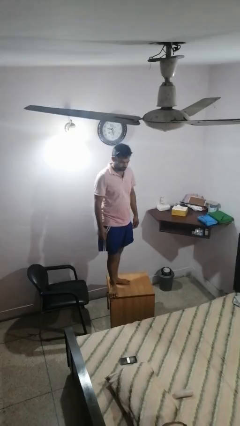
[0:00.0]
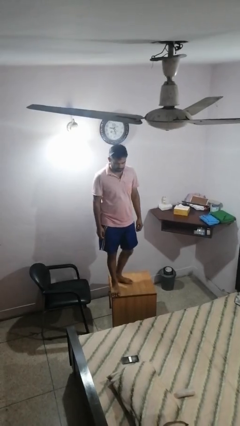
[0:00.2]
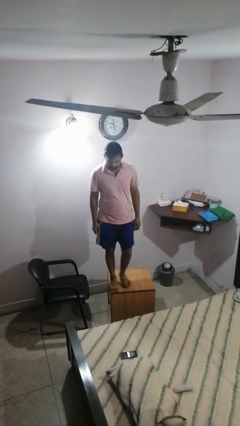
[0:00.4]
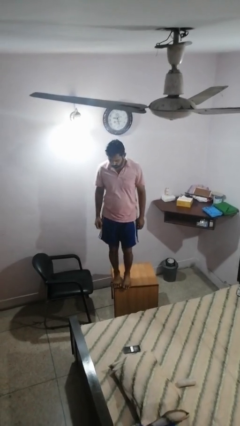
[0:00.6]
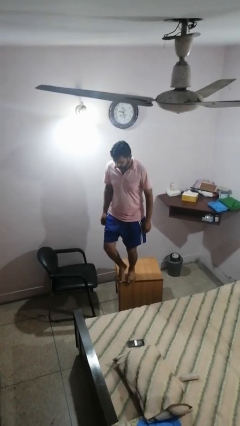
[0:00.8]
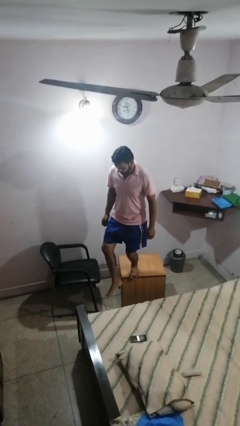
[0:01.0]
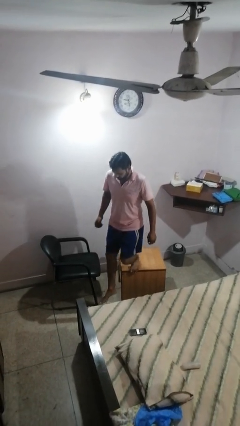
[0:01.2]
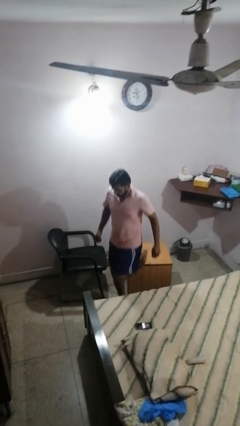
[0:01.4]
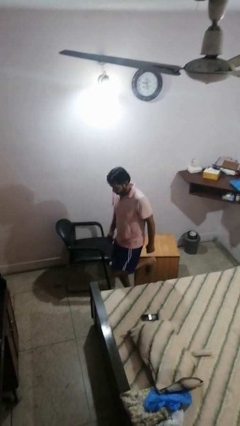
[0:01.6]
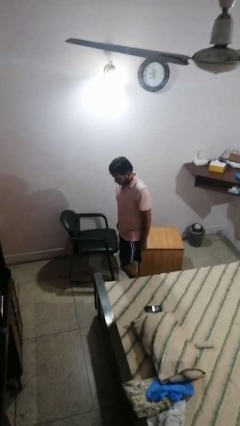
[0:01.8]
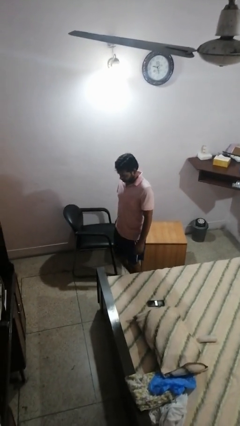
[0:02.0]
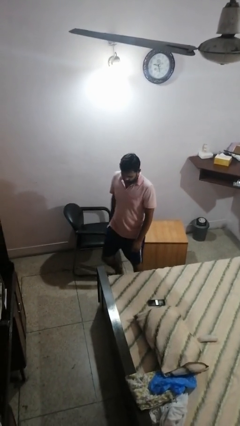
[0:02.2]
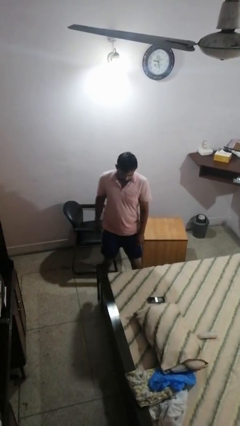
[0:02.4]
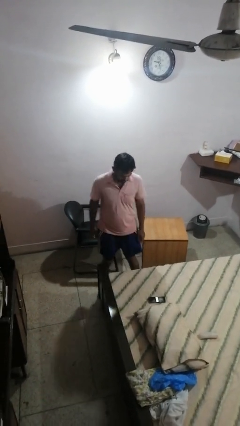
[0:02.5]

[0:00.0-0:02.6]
person climbs off table

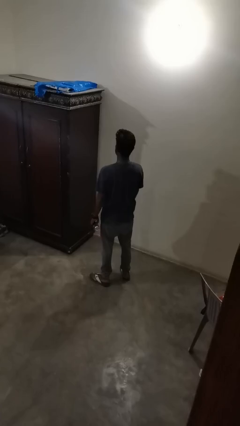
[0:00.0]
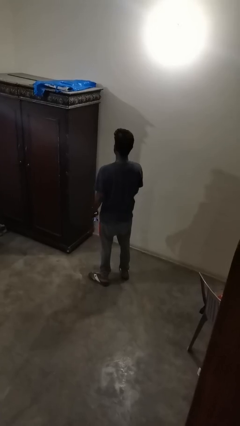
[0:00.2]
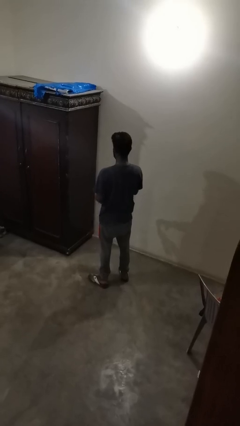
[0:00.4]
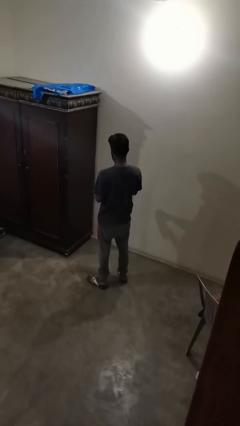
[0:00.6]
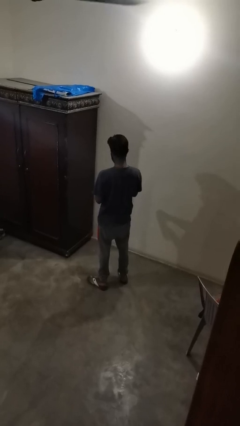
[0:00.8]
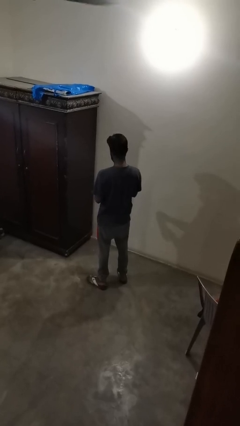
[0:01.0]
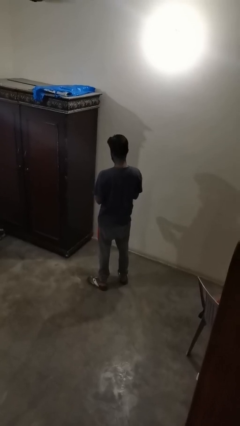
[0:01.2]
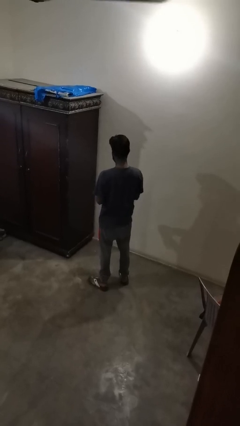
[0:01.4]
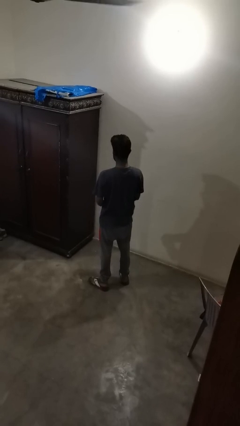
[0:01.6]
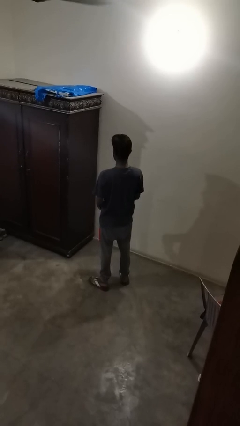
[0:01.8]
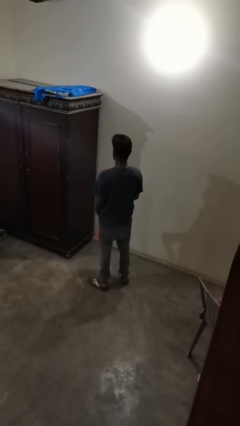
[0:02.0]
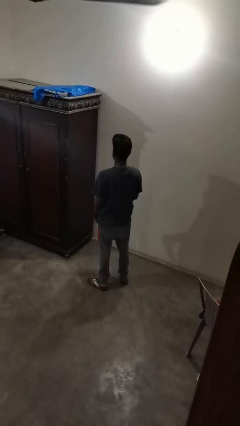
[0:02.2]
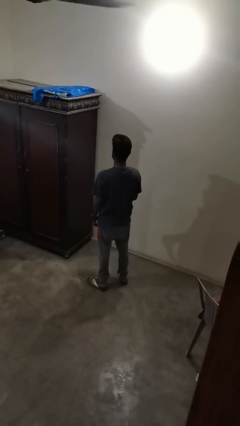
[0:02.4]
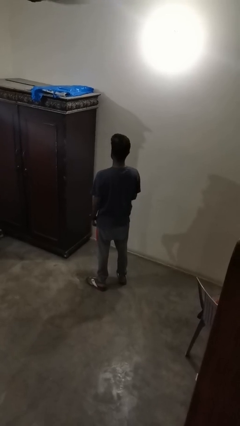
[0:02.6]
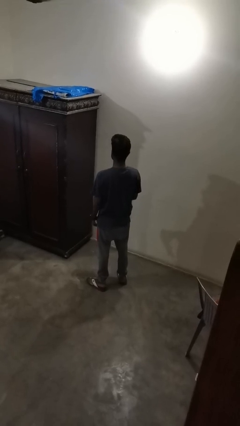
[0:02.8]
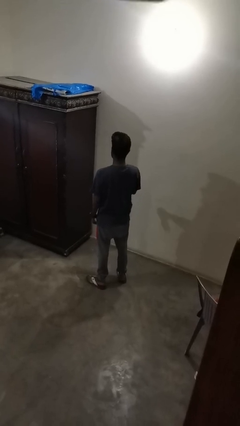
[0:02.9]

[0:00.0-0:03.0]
person opens beverage can

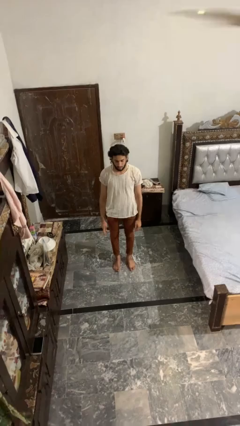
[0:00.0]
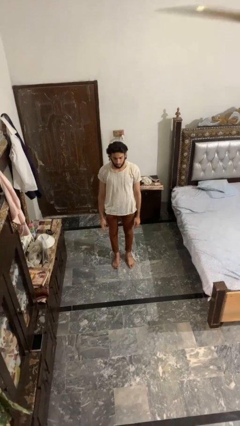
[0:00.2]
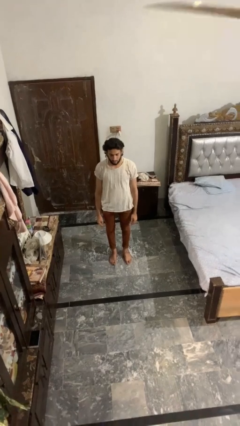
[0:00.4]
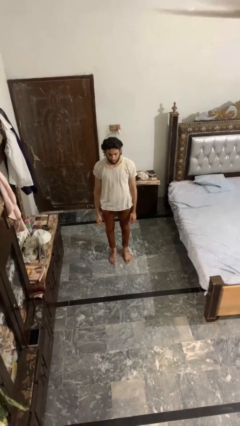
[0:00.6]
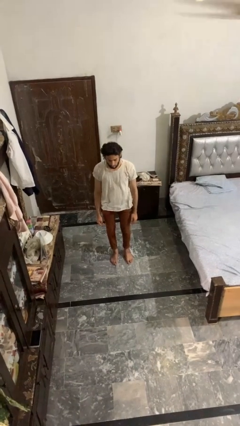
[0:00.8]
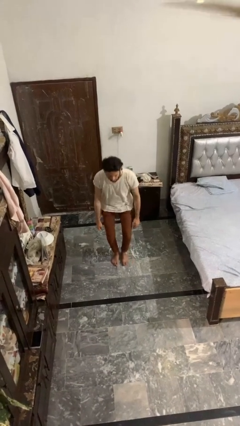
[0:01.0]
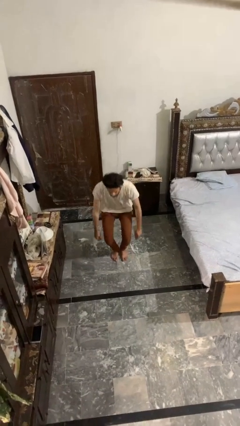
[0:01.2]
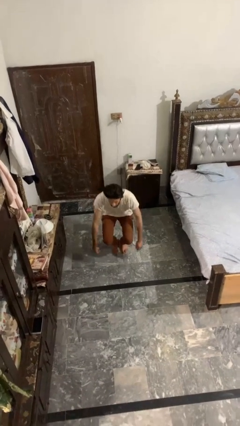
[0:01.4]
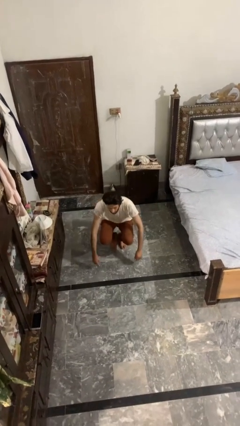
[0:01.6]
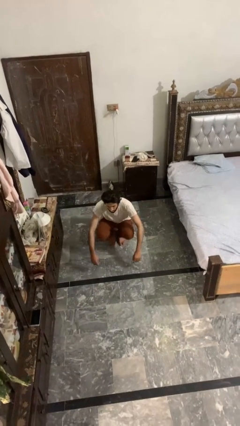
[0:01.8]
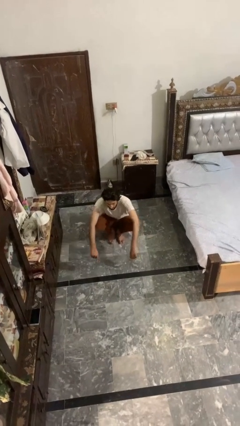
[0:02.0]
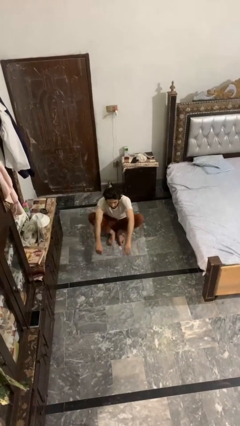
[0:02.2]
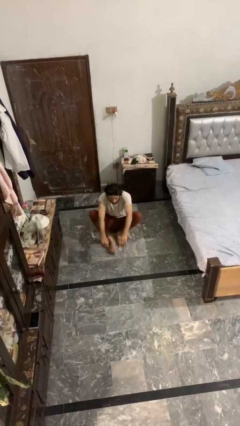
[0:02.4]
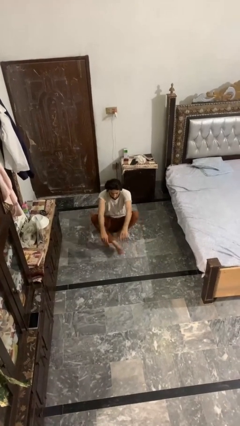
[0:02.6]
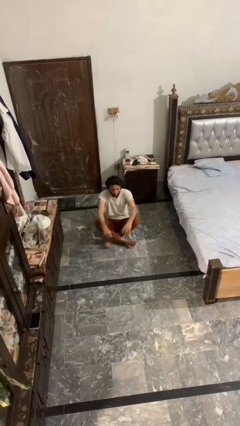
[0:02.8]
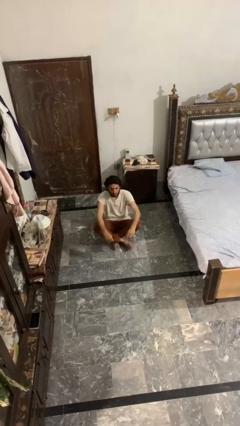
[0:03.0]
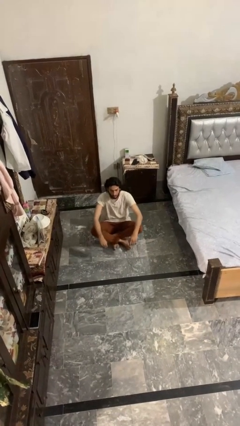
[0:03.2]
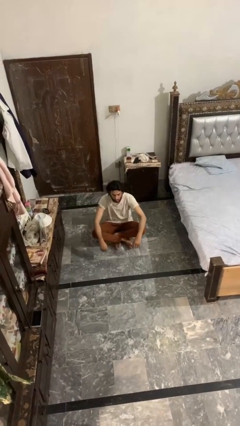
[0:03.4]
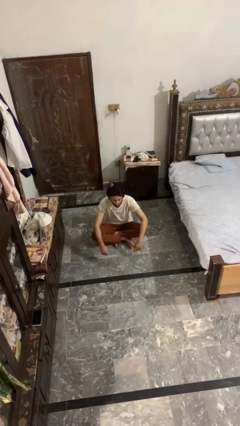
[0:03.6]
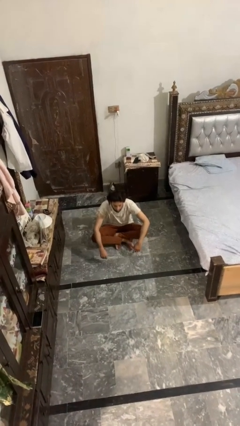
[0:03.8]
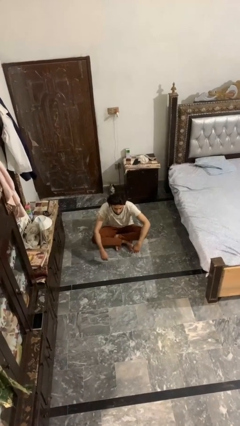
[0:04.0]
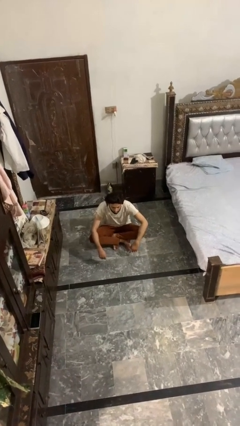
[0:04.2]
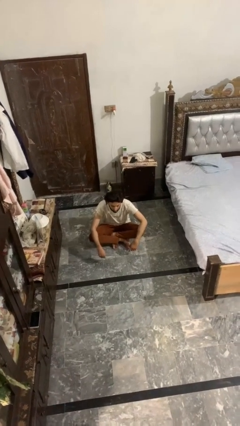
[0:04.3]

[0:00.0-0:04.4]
person sits crisscross

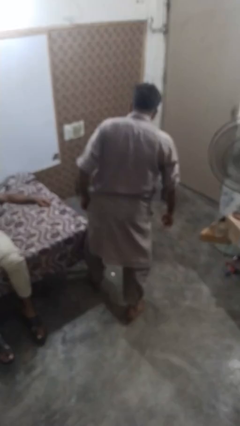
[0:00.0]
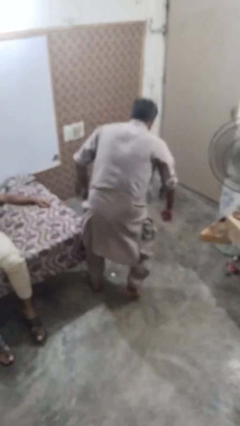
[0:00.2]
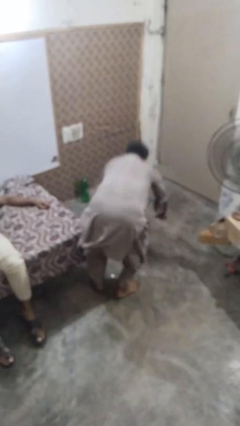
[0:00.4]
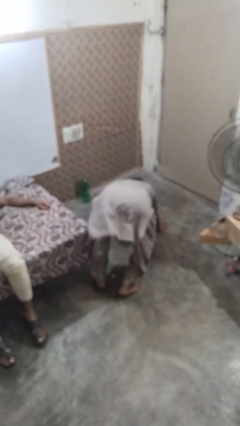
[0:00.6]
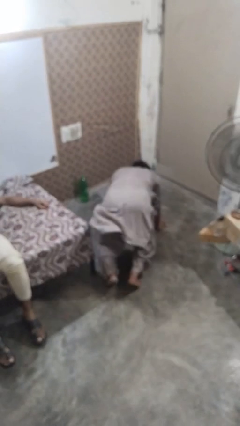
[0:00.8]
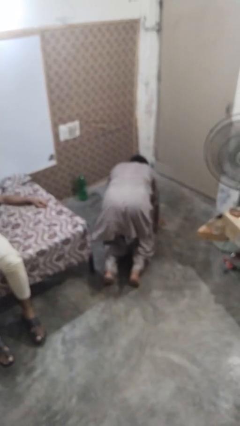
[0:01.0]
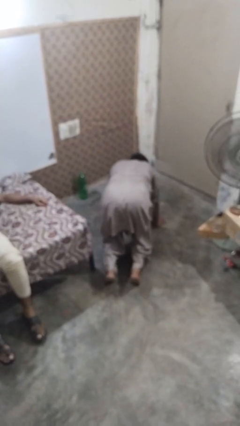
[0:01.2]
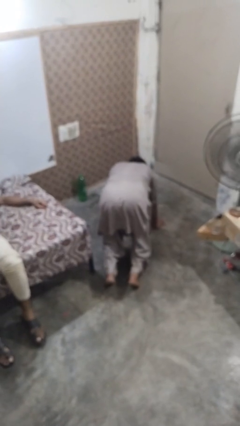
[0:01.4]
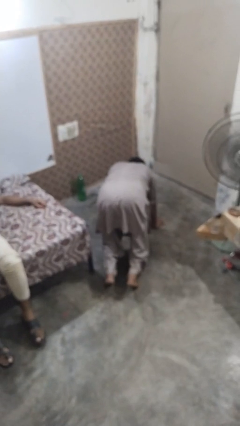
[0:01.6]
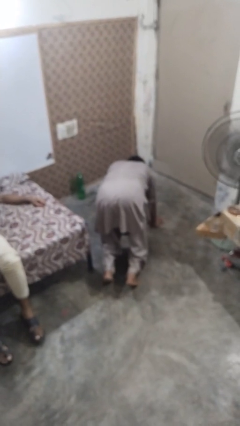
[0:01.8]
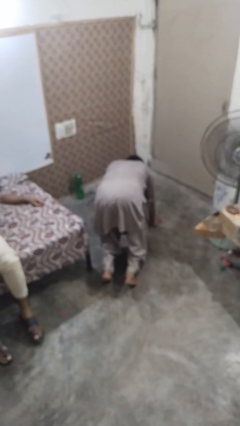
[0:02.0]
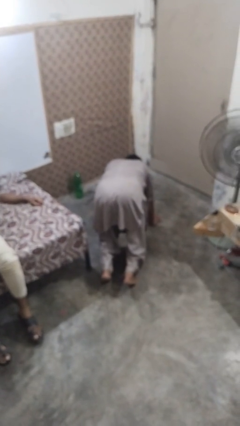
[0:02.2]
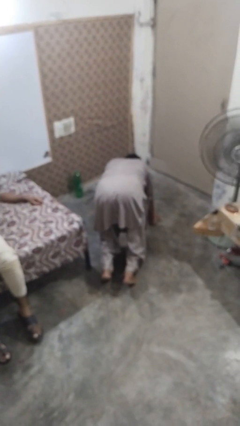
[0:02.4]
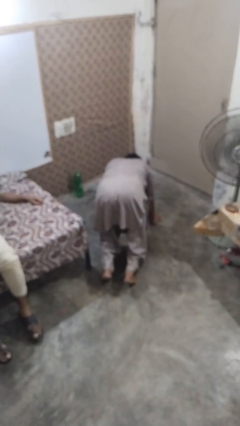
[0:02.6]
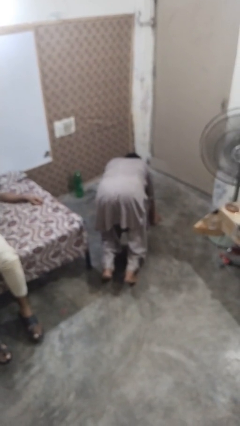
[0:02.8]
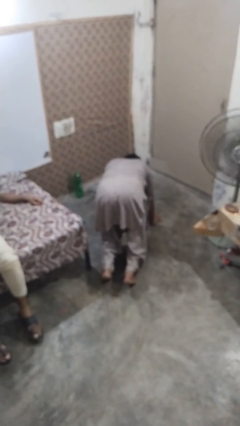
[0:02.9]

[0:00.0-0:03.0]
person trips on object on floor

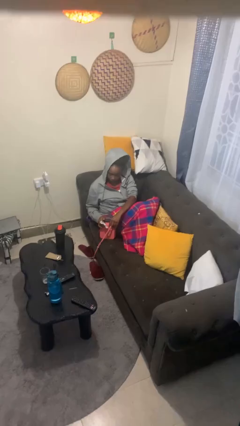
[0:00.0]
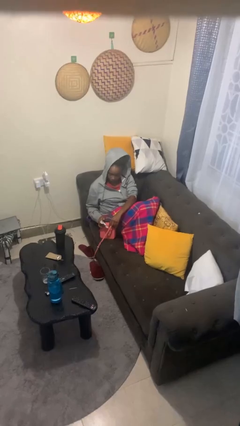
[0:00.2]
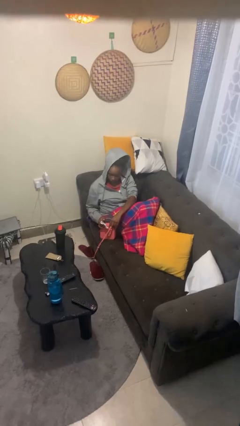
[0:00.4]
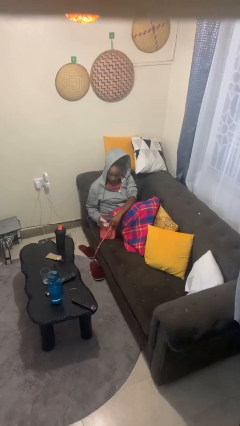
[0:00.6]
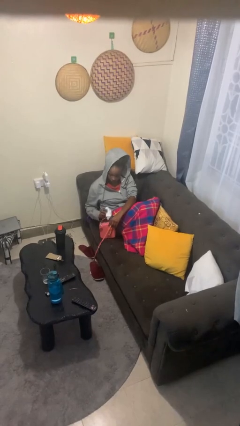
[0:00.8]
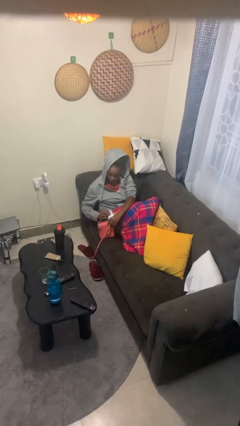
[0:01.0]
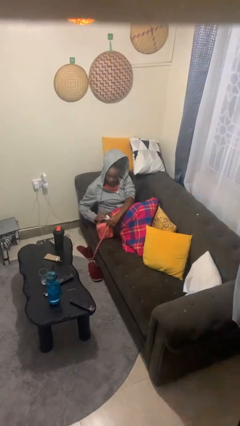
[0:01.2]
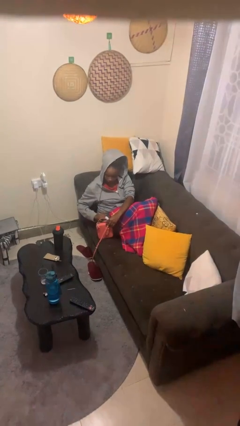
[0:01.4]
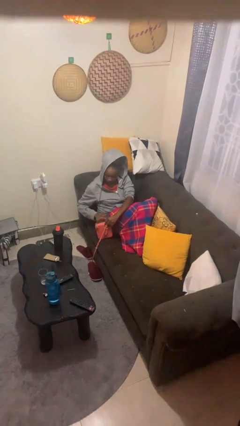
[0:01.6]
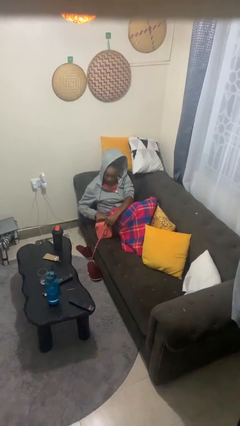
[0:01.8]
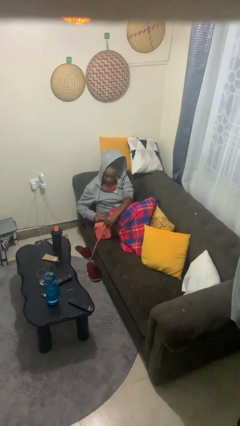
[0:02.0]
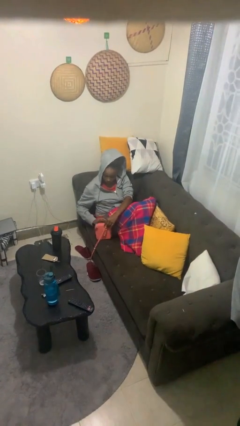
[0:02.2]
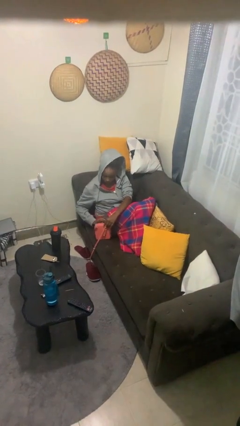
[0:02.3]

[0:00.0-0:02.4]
person puts object into purse

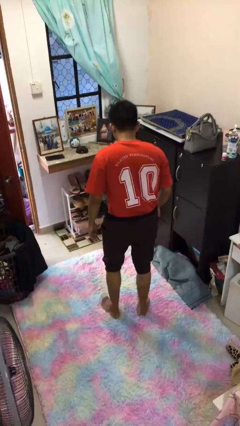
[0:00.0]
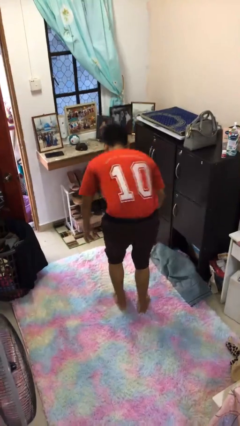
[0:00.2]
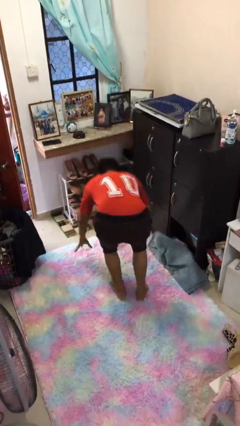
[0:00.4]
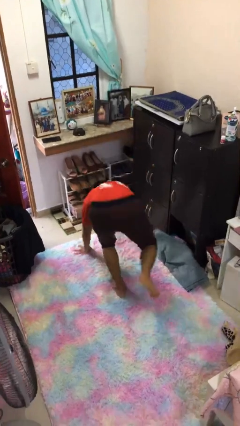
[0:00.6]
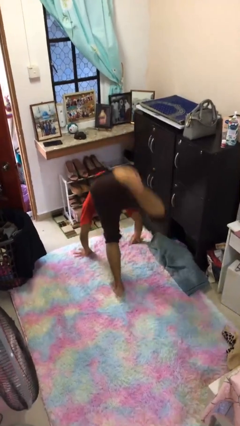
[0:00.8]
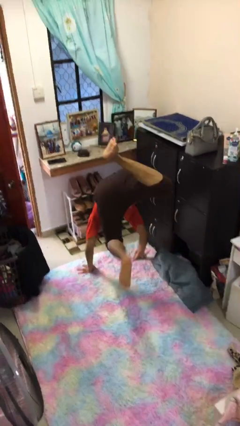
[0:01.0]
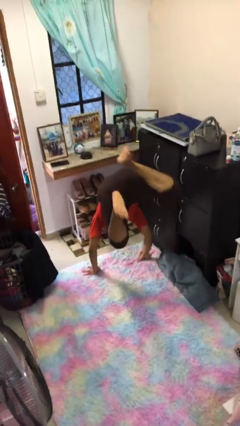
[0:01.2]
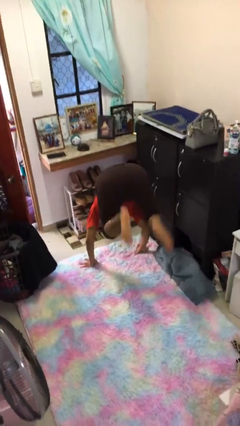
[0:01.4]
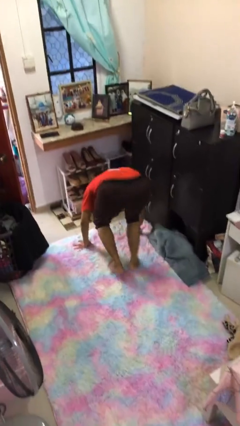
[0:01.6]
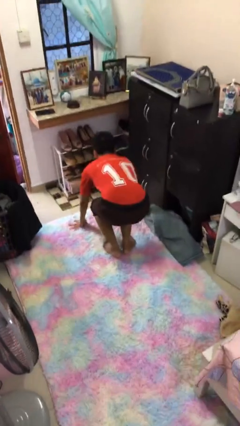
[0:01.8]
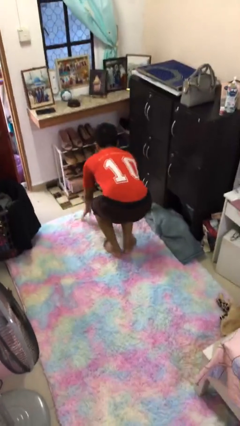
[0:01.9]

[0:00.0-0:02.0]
person handstand
